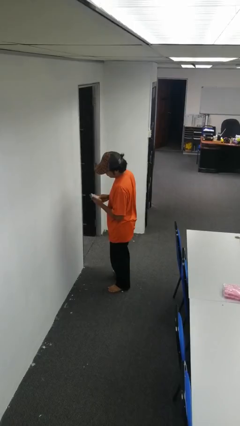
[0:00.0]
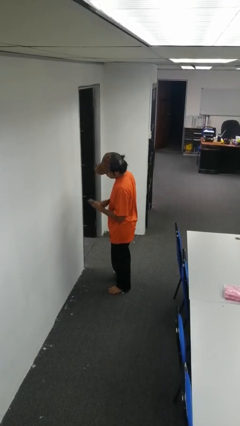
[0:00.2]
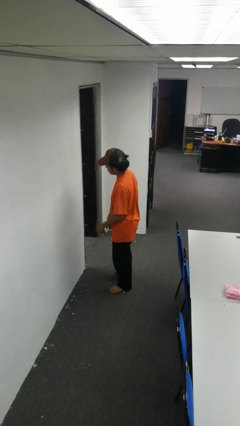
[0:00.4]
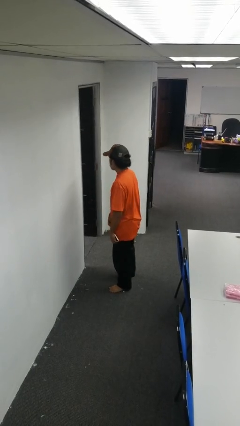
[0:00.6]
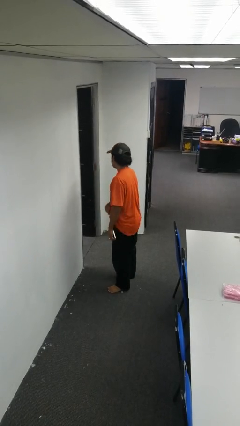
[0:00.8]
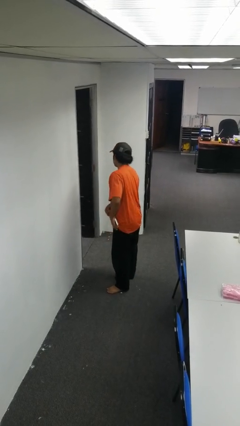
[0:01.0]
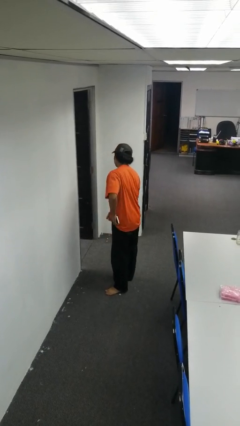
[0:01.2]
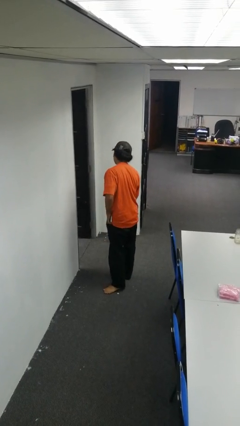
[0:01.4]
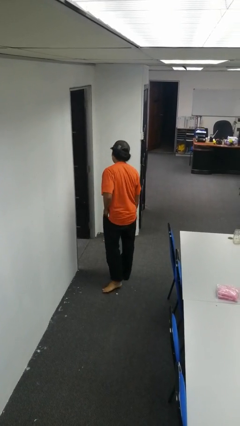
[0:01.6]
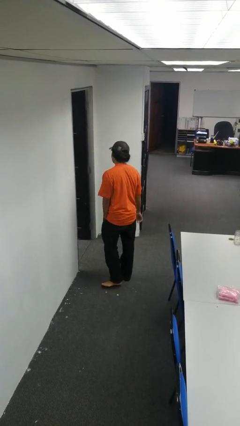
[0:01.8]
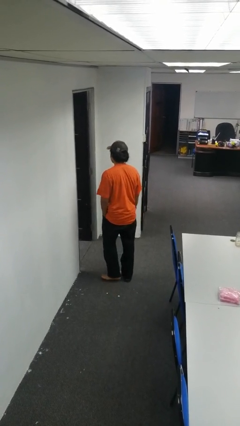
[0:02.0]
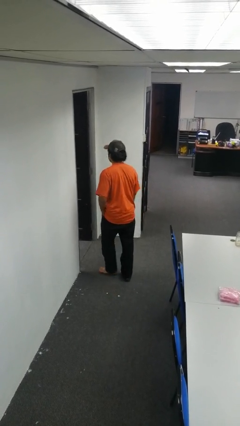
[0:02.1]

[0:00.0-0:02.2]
person puts phone into pocket

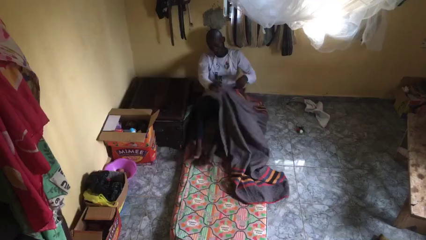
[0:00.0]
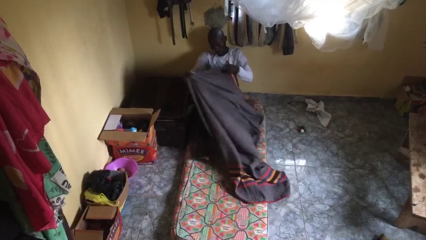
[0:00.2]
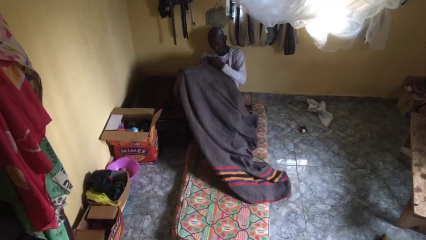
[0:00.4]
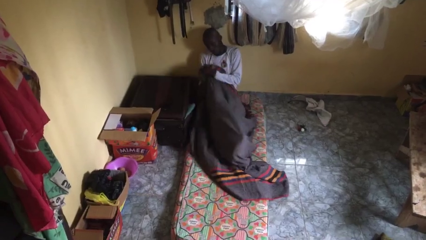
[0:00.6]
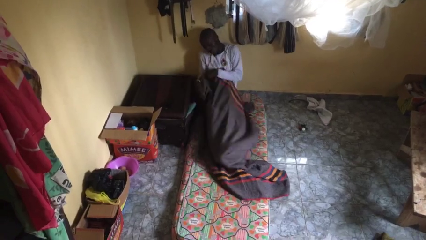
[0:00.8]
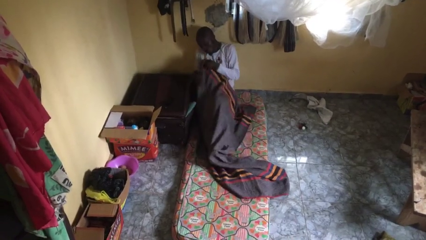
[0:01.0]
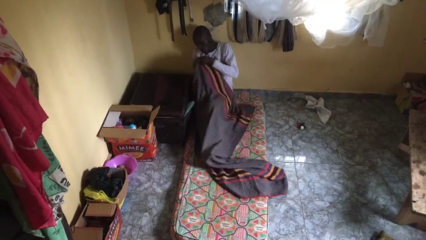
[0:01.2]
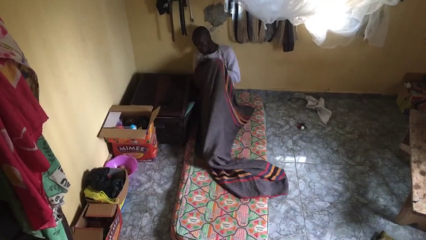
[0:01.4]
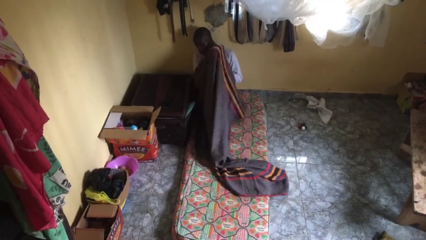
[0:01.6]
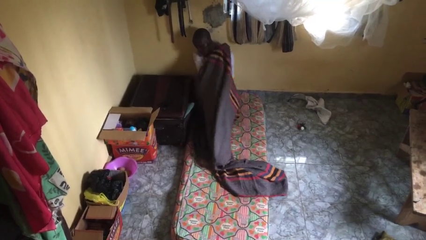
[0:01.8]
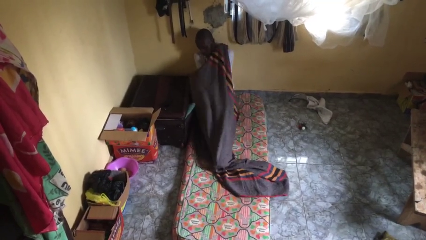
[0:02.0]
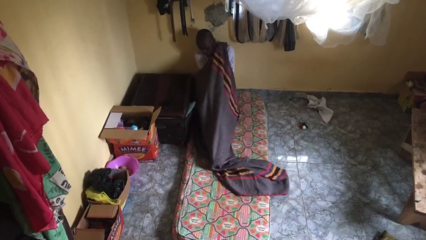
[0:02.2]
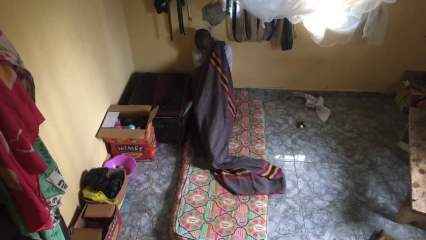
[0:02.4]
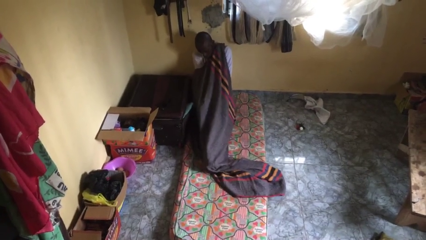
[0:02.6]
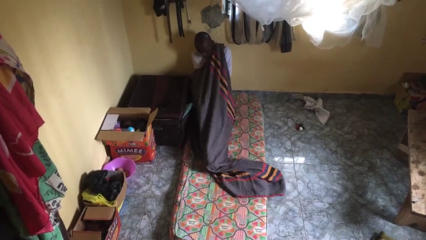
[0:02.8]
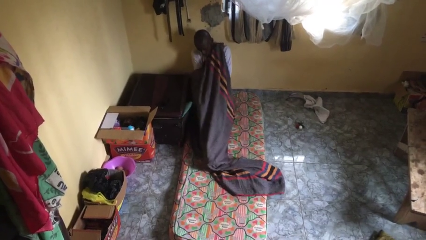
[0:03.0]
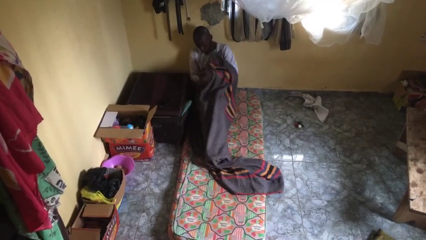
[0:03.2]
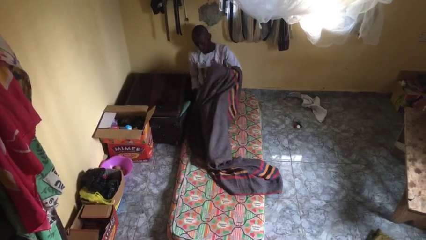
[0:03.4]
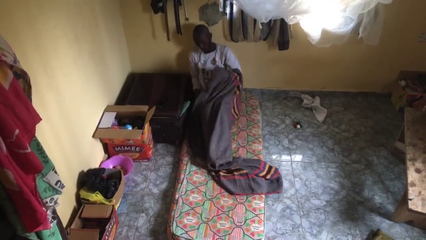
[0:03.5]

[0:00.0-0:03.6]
person covers with blanket

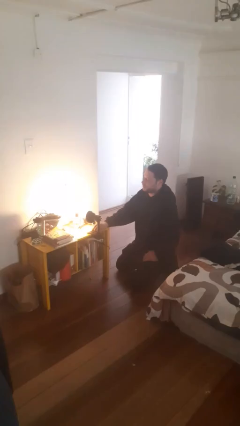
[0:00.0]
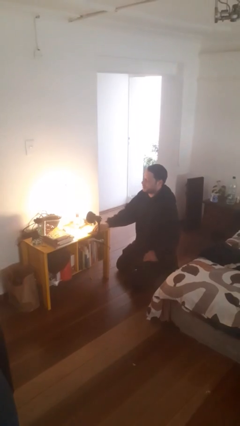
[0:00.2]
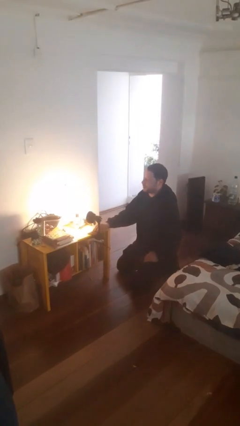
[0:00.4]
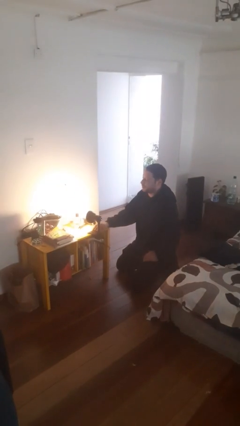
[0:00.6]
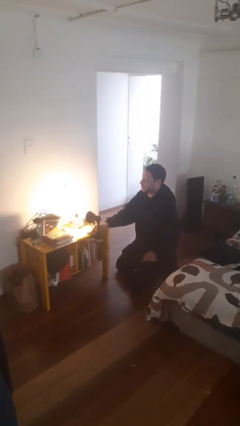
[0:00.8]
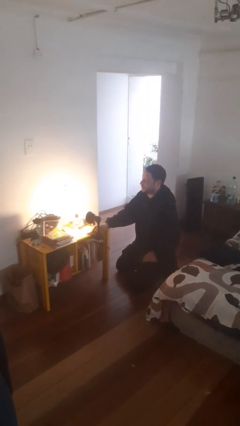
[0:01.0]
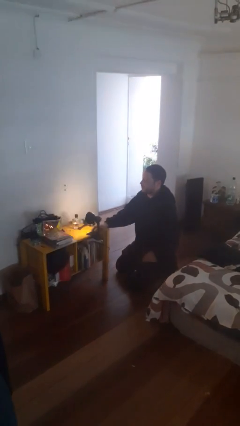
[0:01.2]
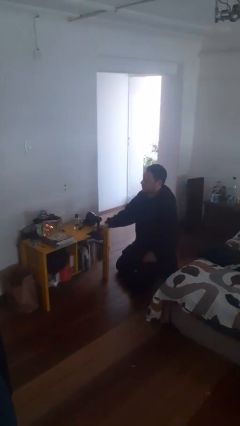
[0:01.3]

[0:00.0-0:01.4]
person turns on lamp

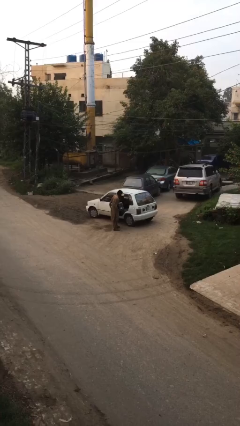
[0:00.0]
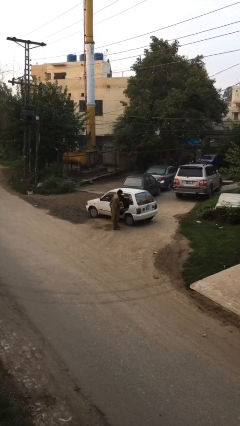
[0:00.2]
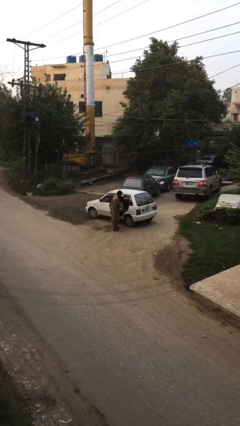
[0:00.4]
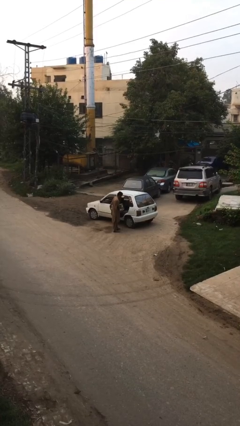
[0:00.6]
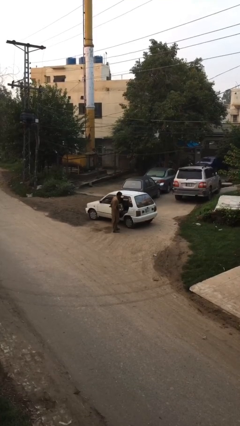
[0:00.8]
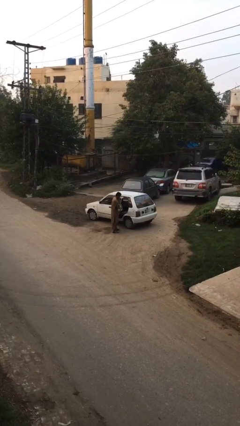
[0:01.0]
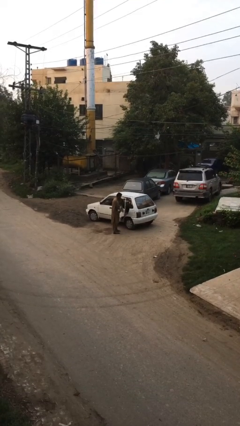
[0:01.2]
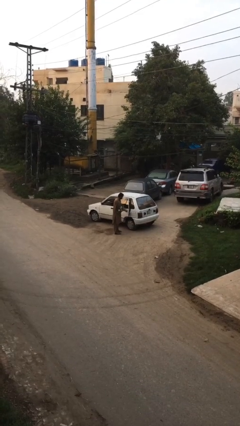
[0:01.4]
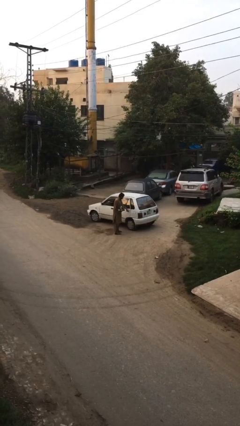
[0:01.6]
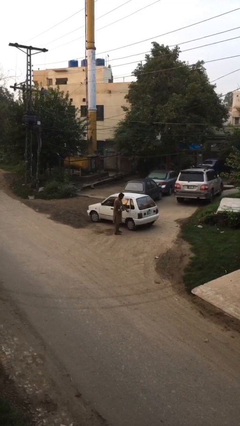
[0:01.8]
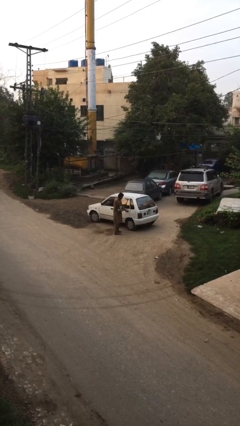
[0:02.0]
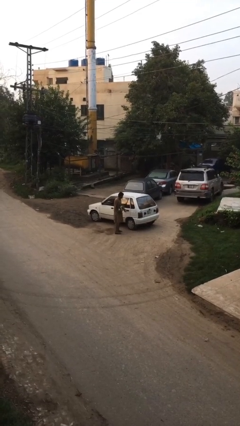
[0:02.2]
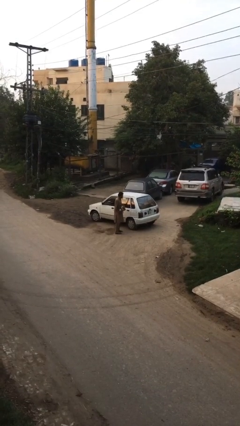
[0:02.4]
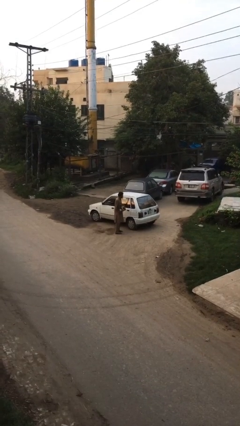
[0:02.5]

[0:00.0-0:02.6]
person closes car door

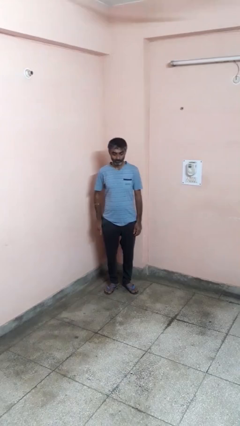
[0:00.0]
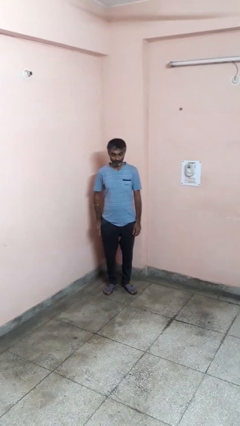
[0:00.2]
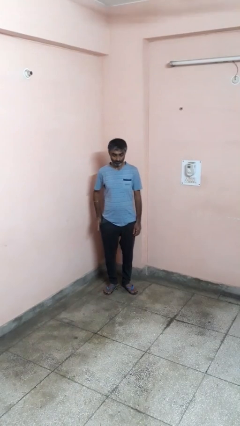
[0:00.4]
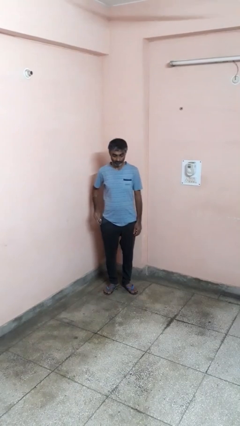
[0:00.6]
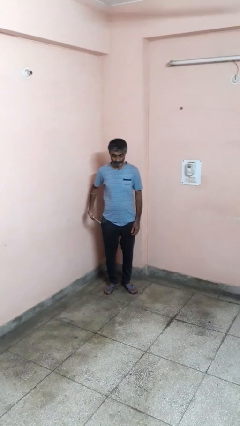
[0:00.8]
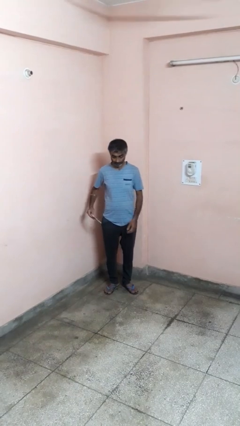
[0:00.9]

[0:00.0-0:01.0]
person takes phone from pocket

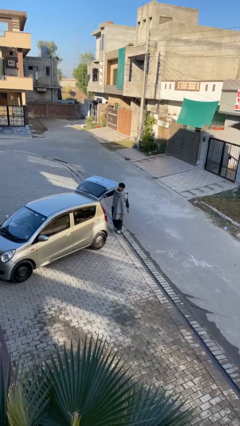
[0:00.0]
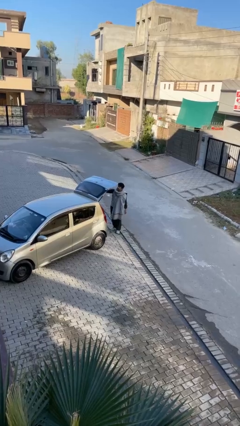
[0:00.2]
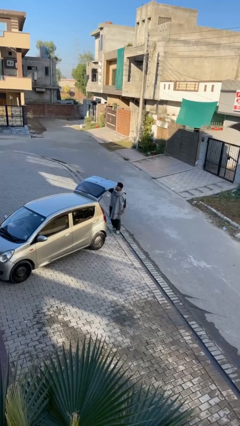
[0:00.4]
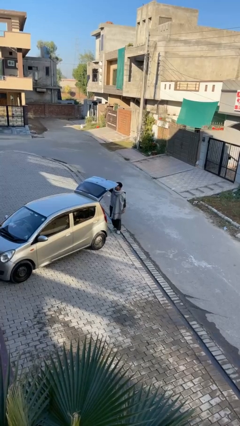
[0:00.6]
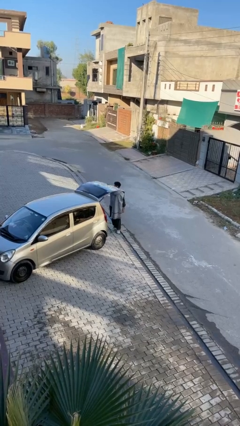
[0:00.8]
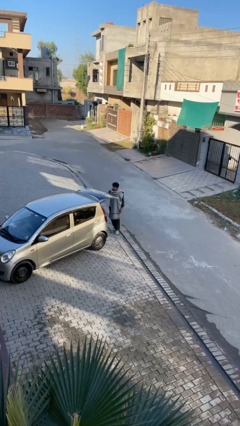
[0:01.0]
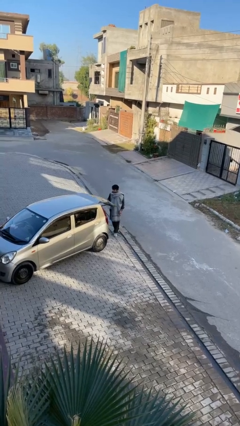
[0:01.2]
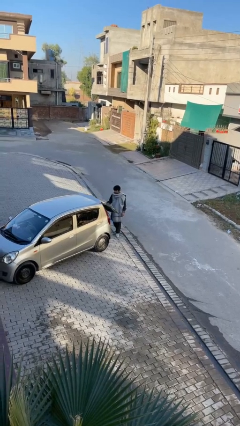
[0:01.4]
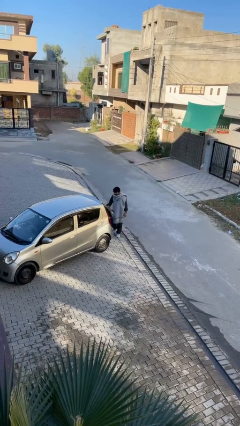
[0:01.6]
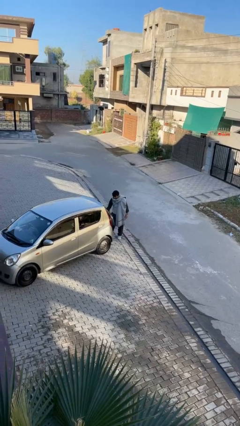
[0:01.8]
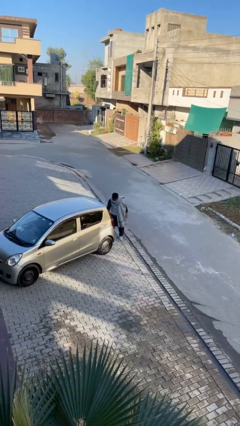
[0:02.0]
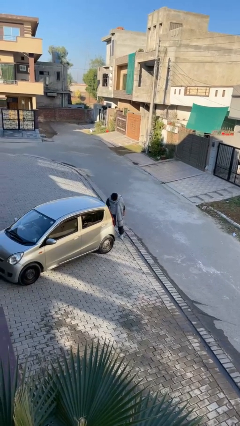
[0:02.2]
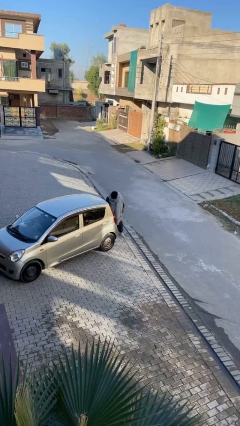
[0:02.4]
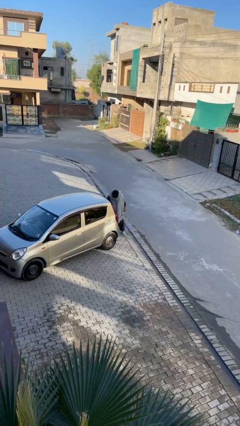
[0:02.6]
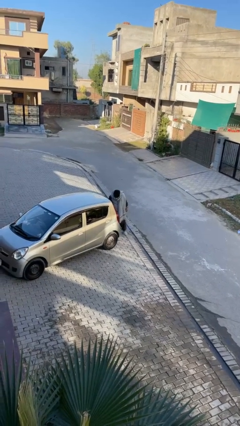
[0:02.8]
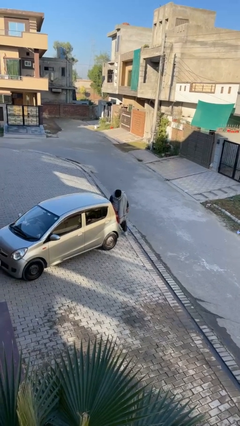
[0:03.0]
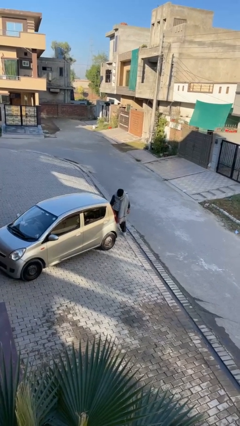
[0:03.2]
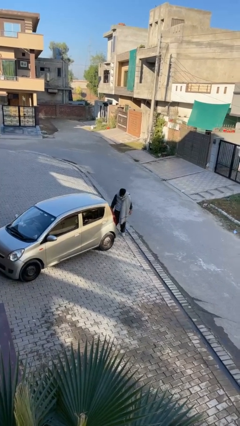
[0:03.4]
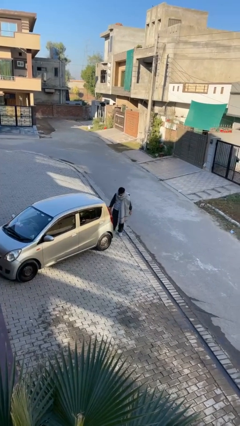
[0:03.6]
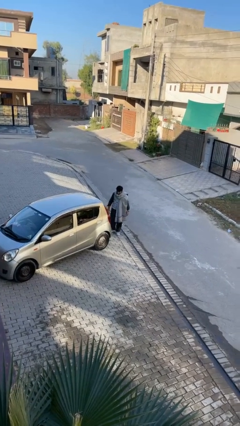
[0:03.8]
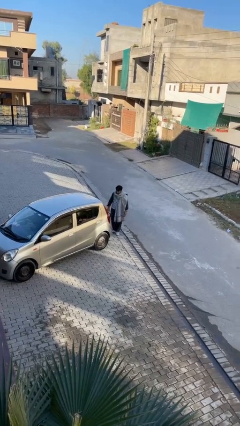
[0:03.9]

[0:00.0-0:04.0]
person closes car trunk

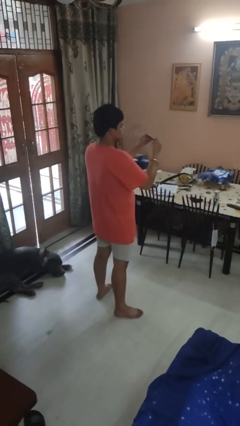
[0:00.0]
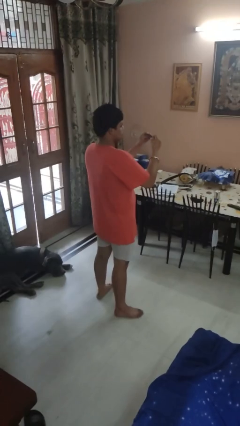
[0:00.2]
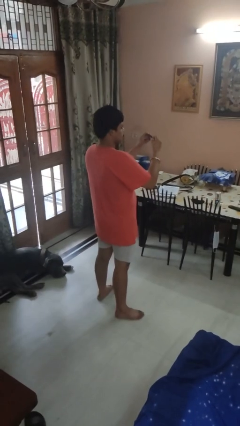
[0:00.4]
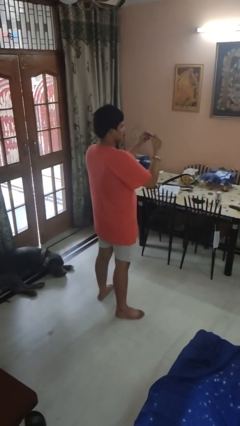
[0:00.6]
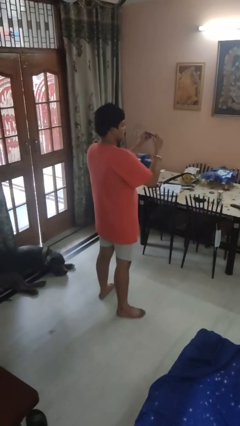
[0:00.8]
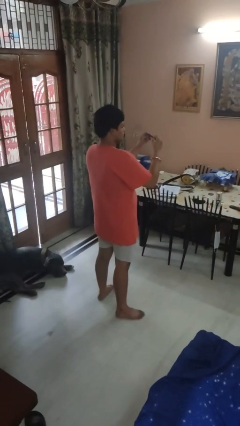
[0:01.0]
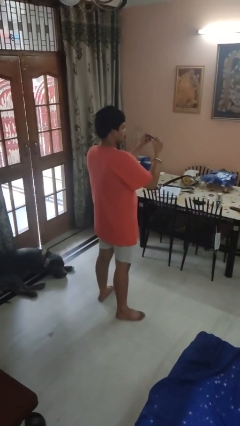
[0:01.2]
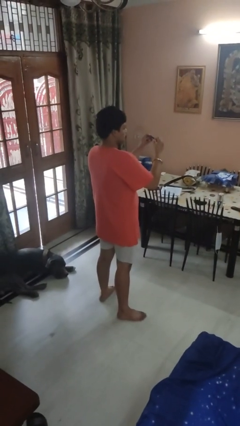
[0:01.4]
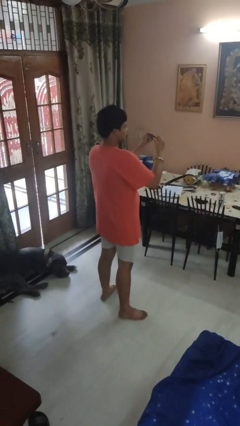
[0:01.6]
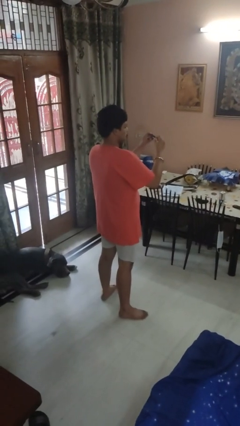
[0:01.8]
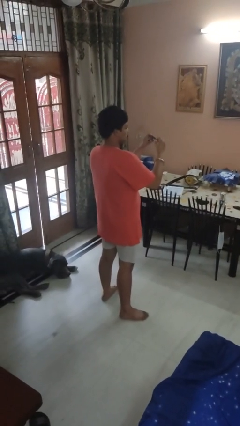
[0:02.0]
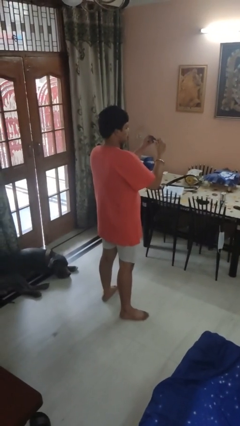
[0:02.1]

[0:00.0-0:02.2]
person clips fingernails

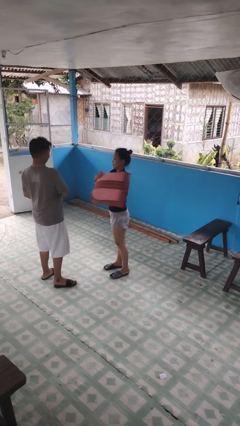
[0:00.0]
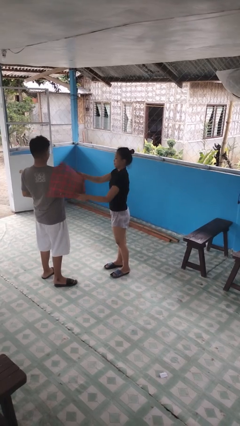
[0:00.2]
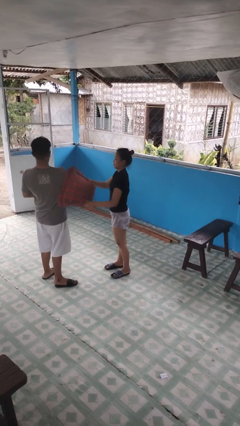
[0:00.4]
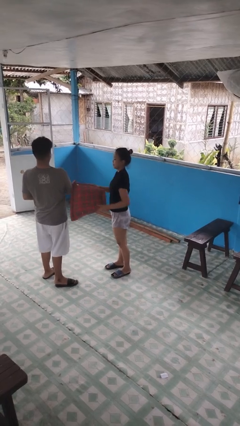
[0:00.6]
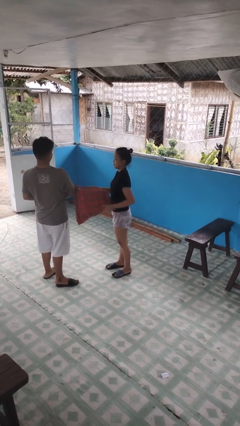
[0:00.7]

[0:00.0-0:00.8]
person hits person with pillow
